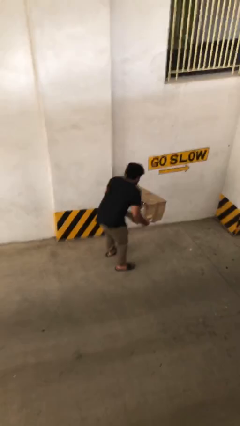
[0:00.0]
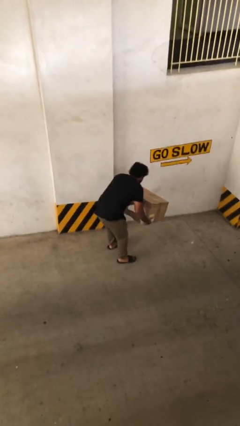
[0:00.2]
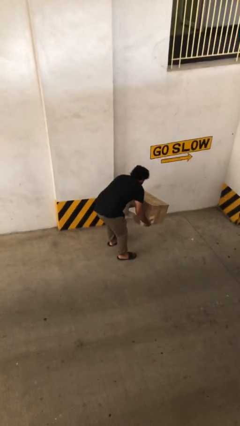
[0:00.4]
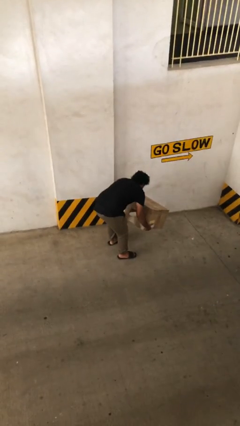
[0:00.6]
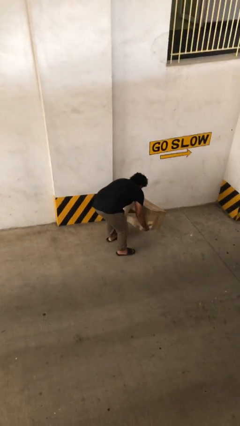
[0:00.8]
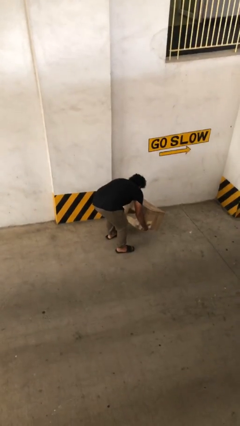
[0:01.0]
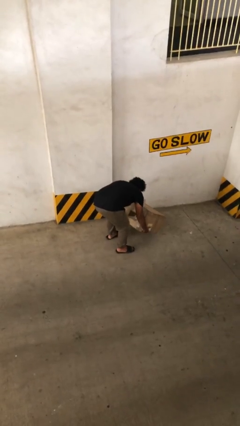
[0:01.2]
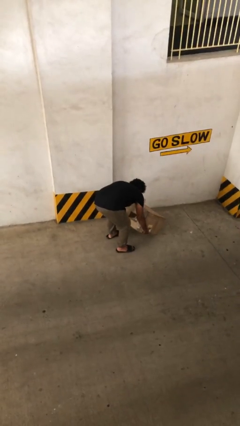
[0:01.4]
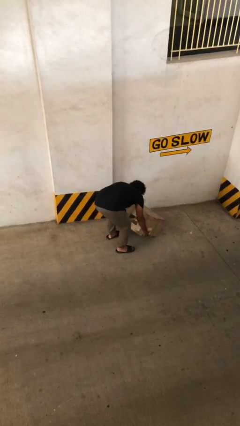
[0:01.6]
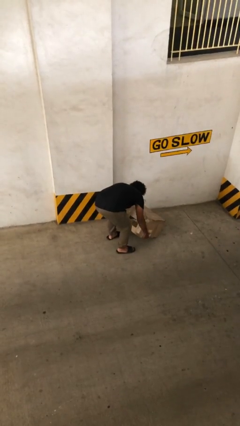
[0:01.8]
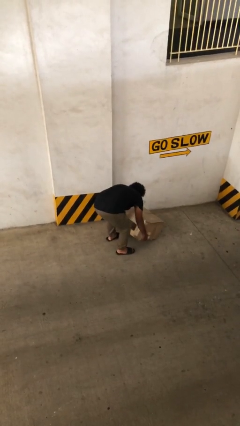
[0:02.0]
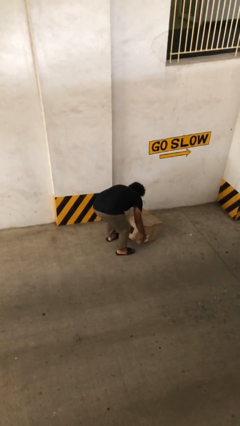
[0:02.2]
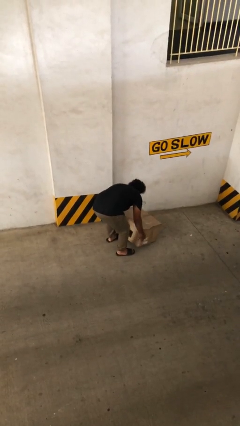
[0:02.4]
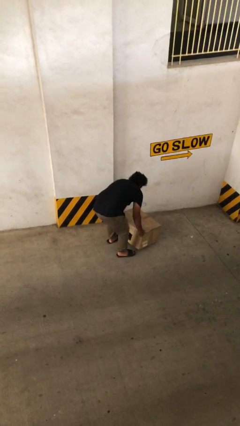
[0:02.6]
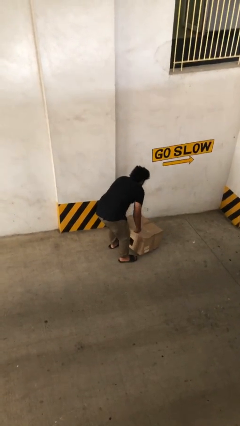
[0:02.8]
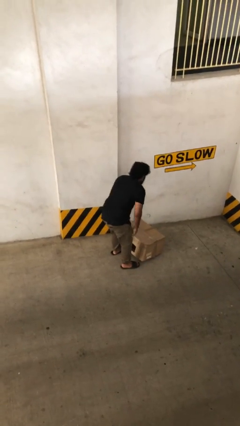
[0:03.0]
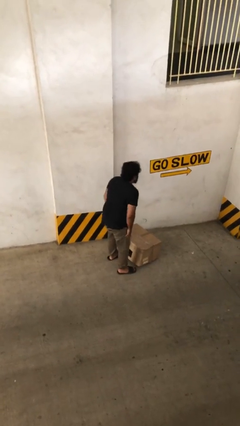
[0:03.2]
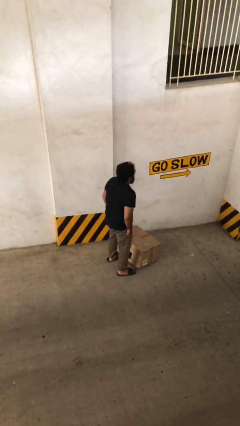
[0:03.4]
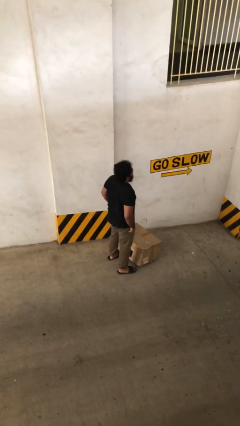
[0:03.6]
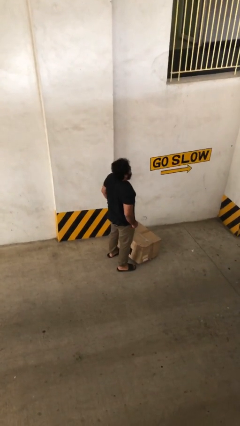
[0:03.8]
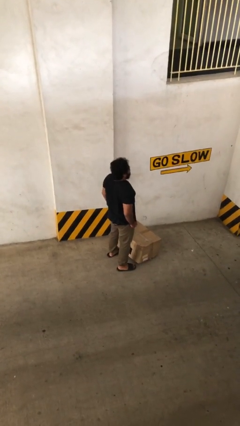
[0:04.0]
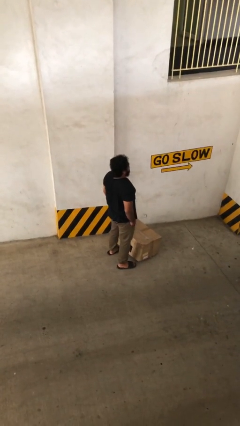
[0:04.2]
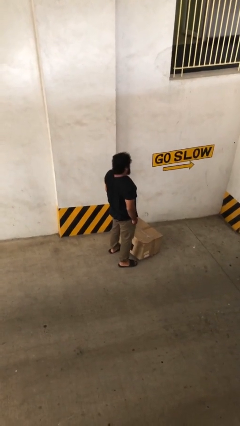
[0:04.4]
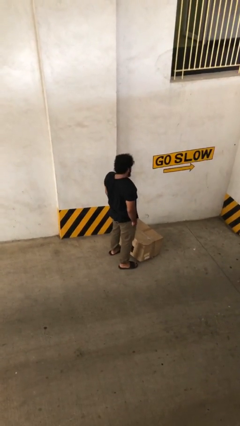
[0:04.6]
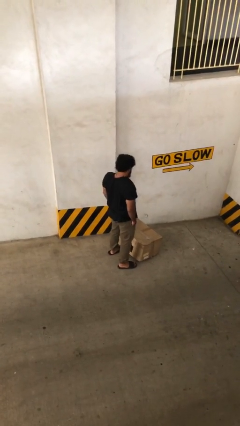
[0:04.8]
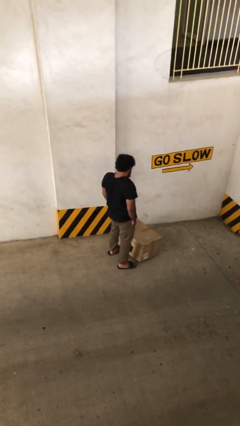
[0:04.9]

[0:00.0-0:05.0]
person puts down object on floor

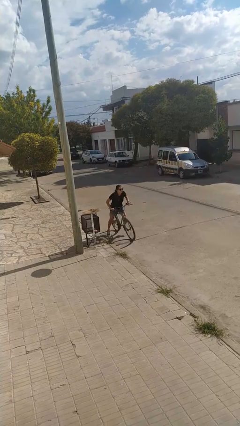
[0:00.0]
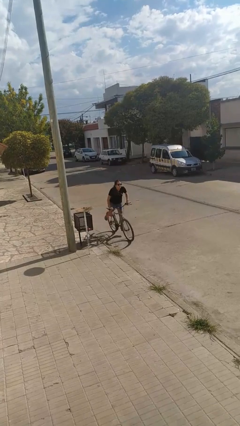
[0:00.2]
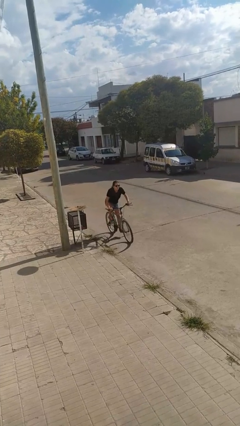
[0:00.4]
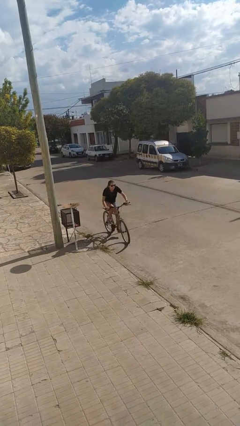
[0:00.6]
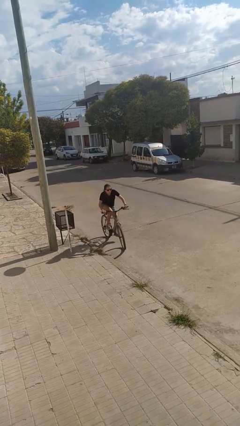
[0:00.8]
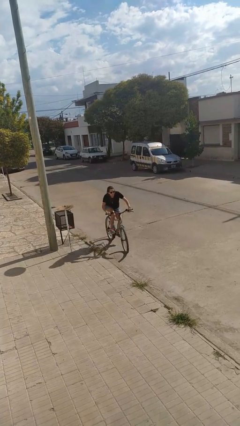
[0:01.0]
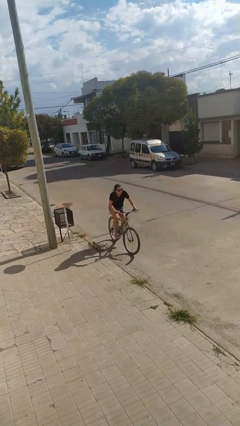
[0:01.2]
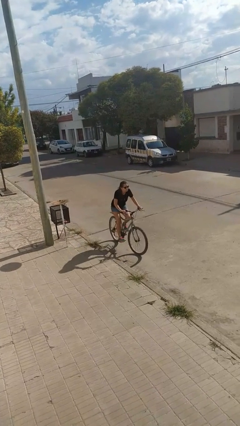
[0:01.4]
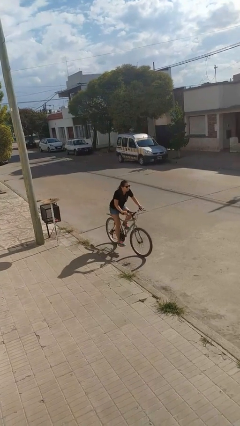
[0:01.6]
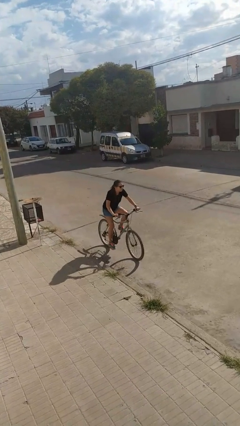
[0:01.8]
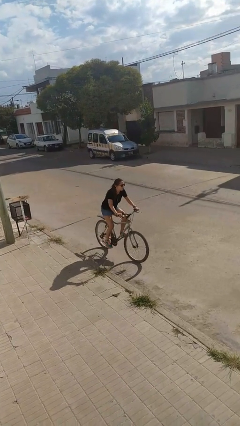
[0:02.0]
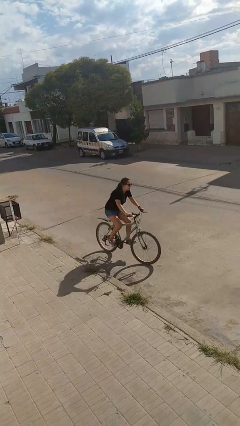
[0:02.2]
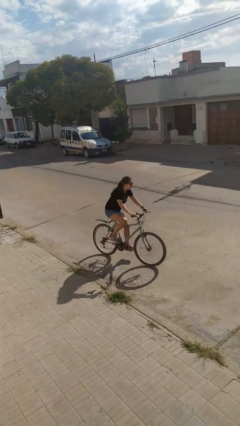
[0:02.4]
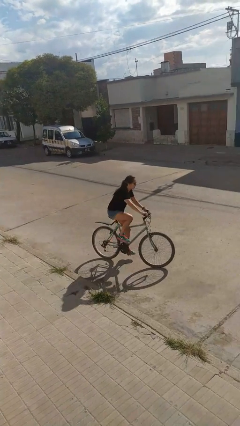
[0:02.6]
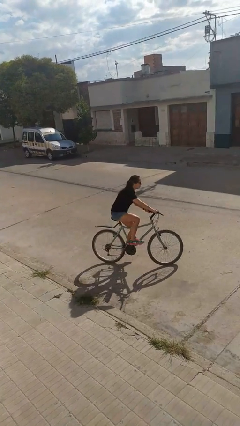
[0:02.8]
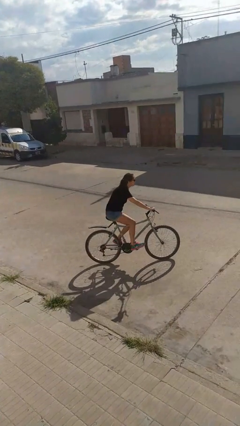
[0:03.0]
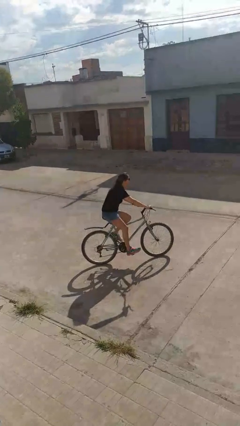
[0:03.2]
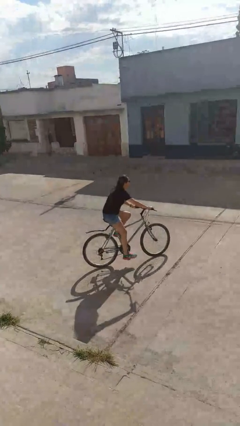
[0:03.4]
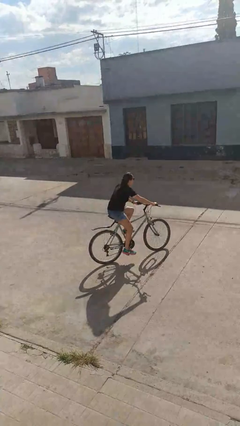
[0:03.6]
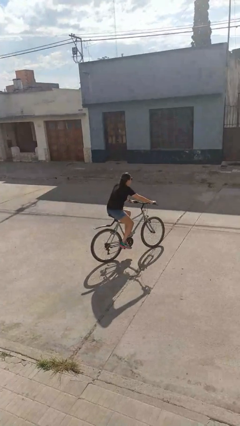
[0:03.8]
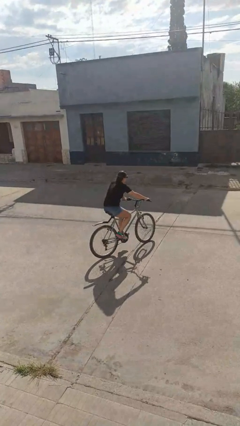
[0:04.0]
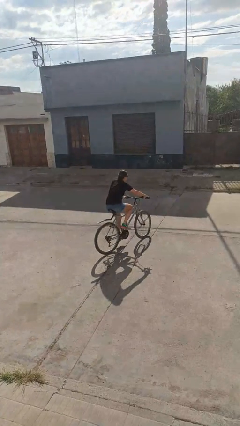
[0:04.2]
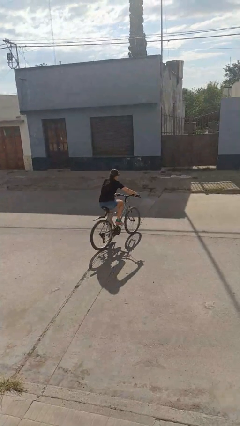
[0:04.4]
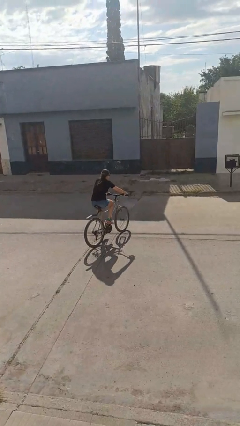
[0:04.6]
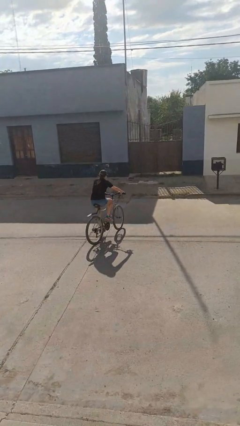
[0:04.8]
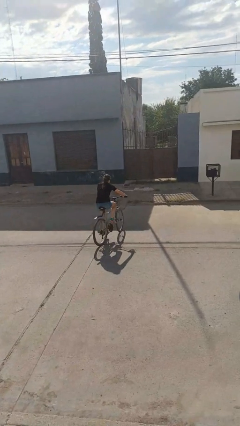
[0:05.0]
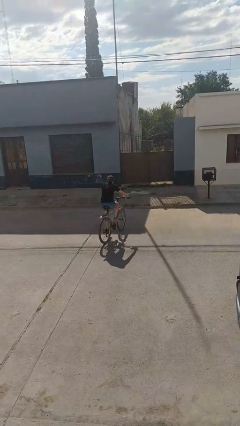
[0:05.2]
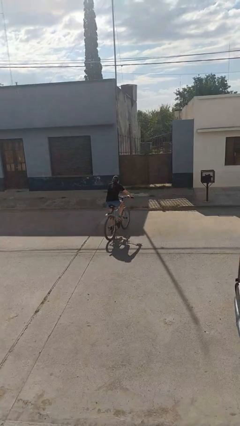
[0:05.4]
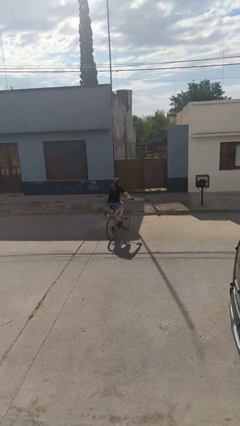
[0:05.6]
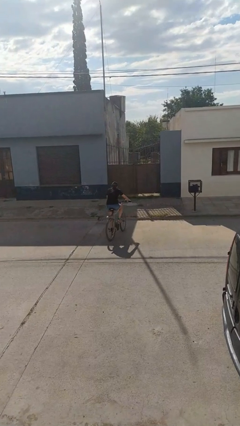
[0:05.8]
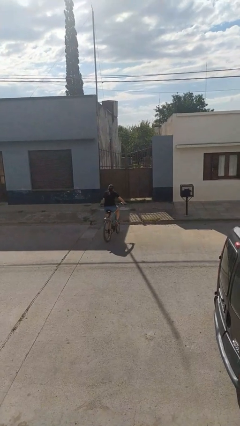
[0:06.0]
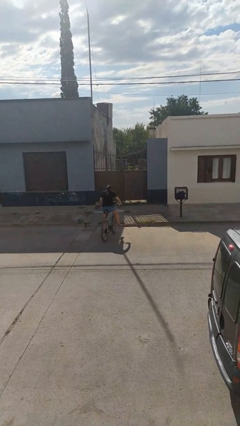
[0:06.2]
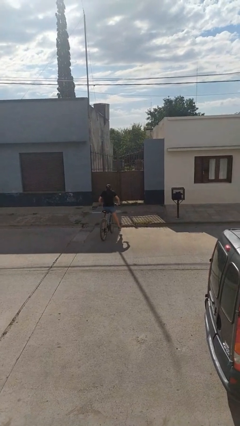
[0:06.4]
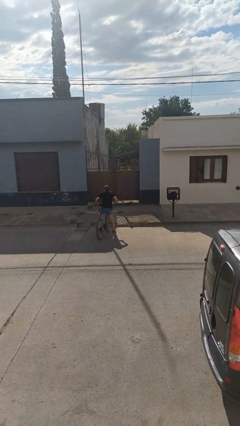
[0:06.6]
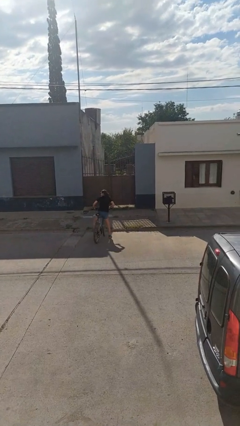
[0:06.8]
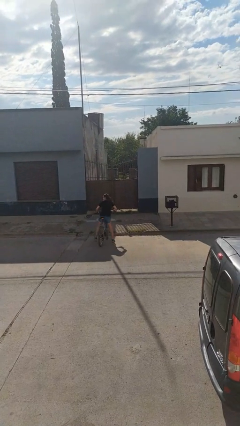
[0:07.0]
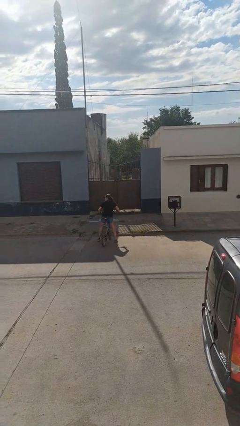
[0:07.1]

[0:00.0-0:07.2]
person rides bicycle

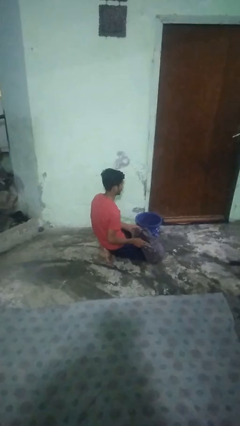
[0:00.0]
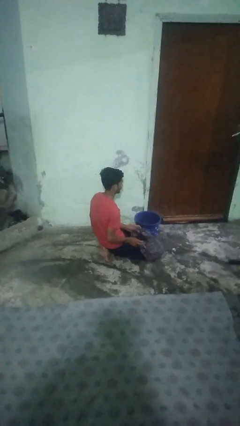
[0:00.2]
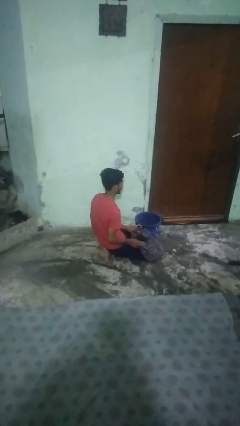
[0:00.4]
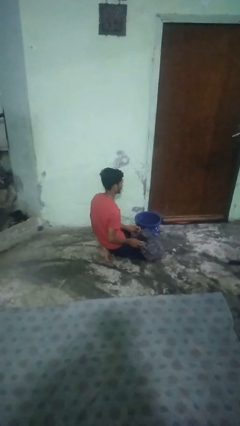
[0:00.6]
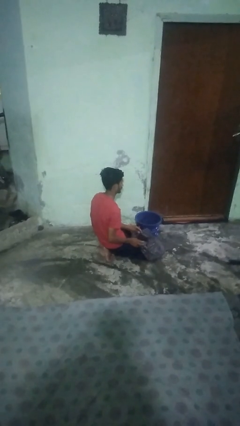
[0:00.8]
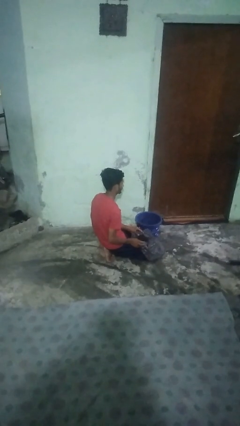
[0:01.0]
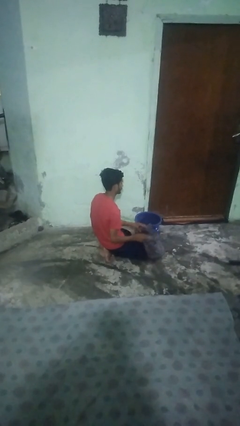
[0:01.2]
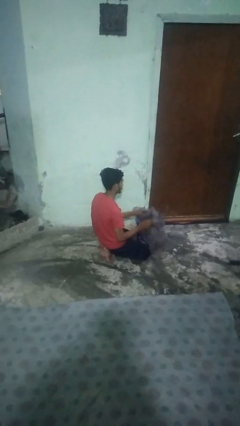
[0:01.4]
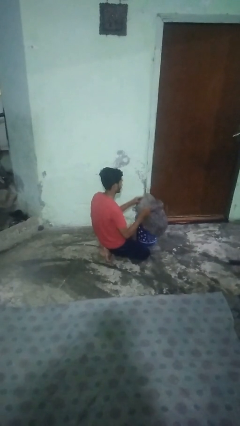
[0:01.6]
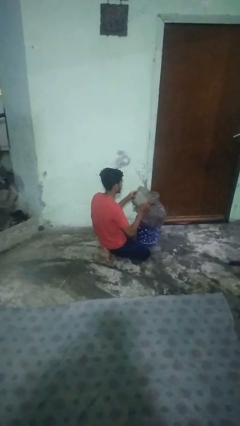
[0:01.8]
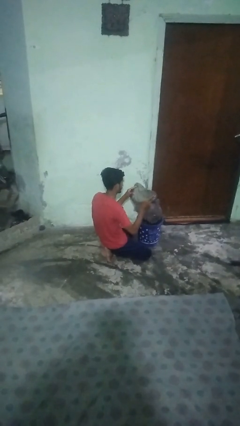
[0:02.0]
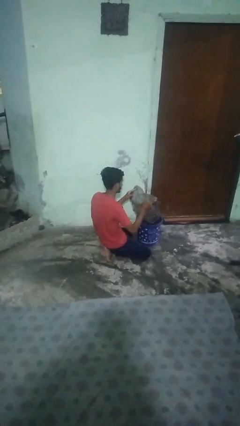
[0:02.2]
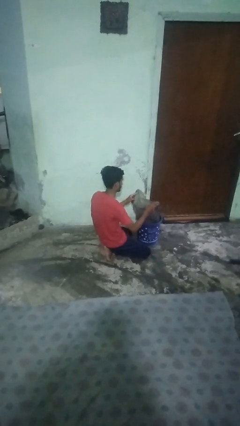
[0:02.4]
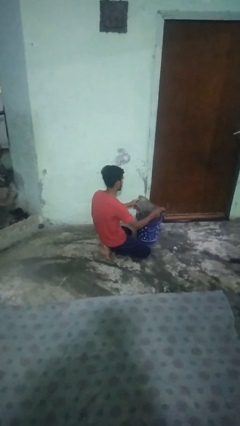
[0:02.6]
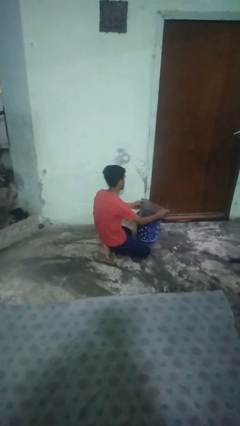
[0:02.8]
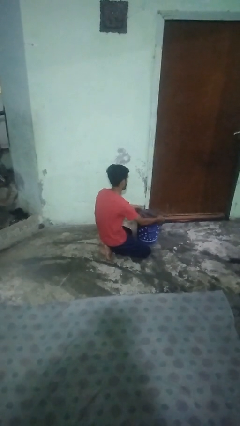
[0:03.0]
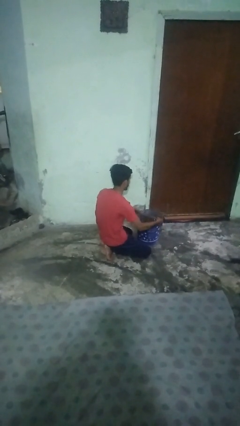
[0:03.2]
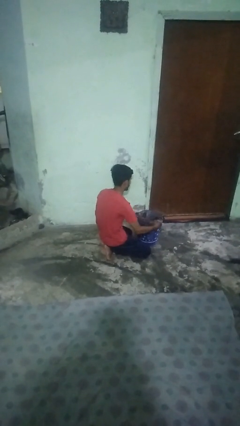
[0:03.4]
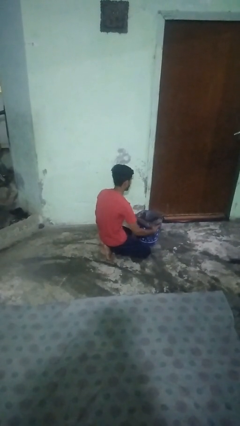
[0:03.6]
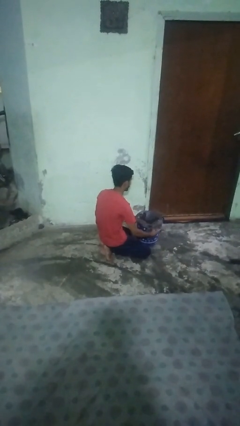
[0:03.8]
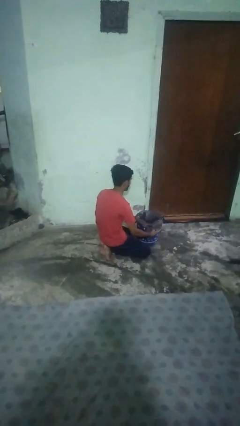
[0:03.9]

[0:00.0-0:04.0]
person inserts trashbag into trashcan

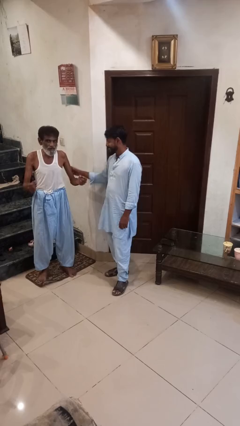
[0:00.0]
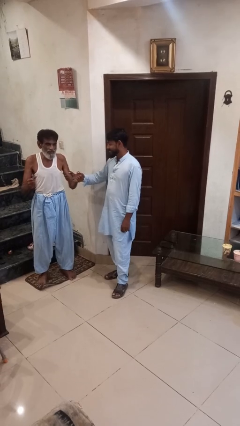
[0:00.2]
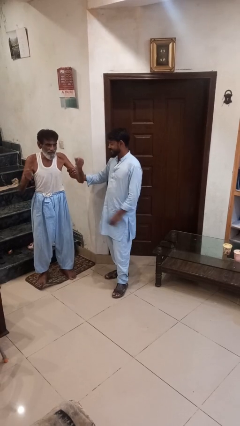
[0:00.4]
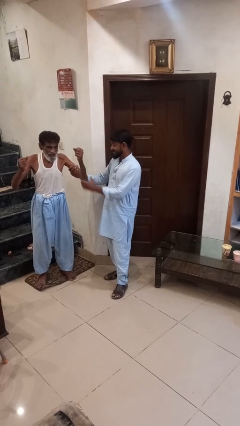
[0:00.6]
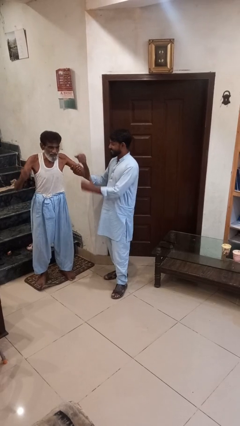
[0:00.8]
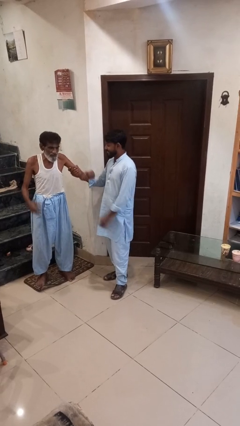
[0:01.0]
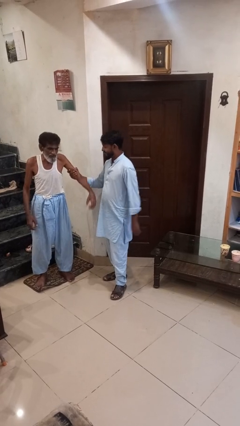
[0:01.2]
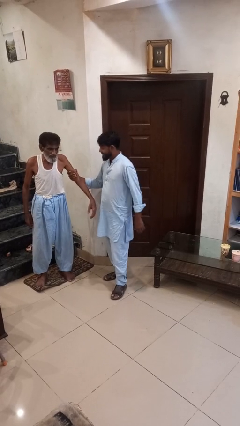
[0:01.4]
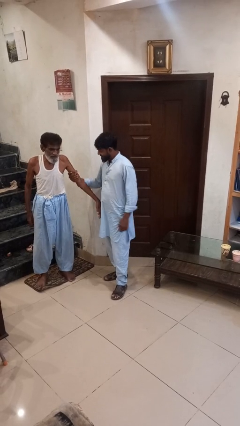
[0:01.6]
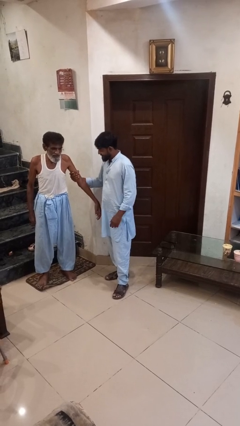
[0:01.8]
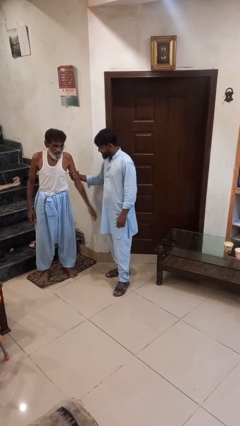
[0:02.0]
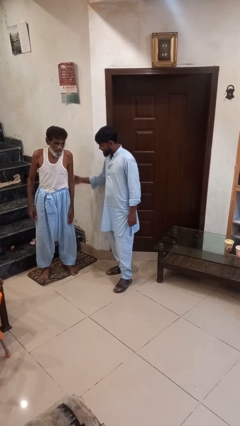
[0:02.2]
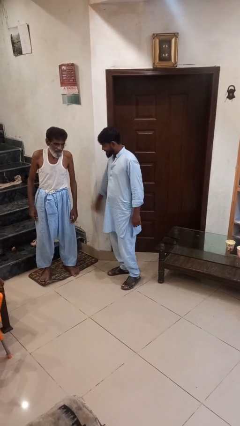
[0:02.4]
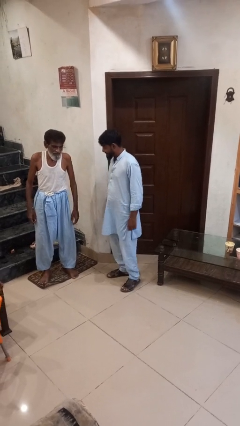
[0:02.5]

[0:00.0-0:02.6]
person grabs person by bicep
